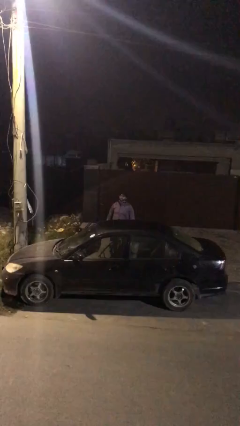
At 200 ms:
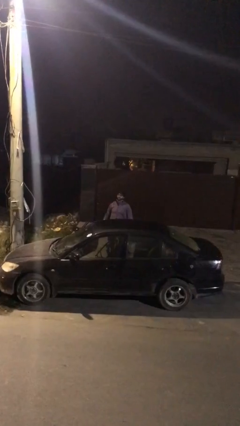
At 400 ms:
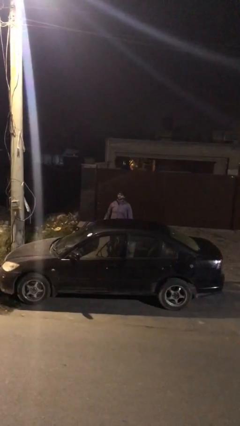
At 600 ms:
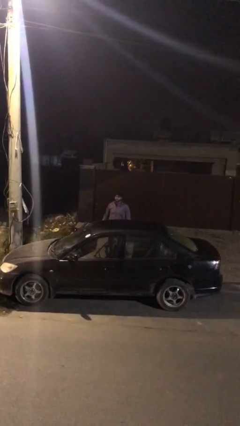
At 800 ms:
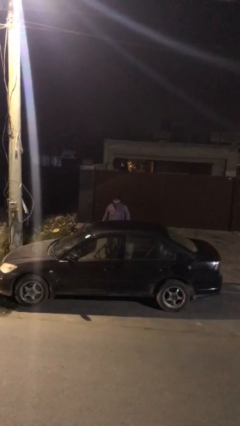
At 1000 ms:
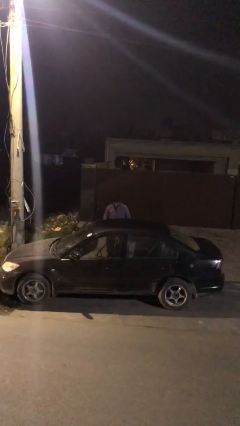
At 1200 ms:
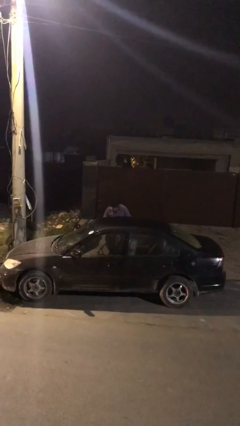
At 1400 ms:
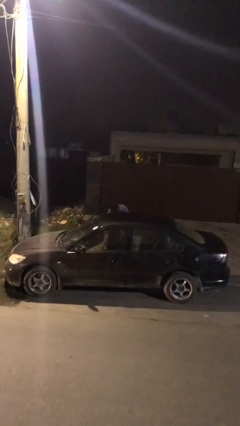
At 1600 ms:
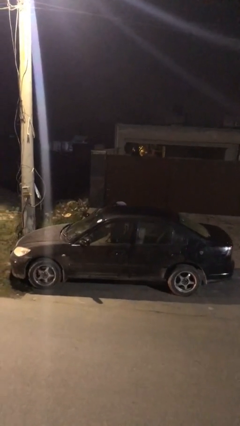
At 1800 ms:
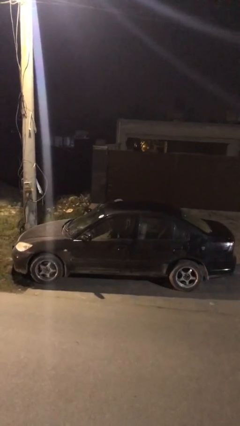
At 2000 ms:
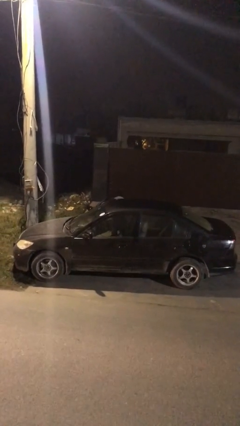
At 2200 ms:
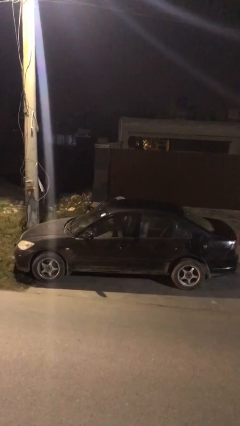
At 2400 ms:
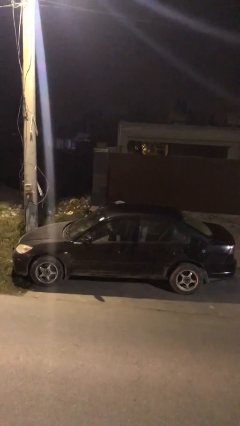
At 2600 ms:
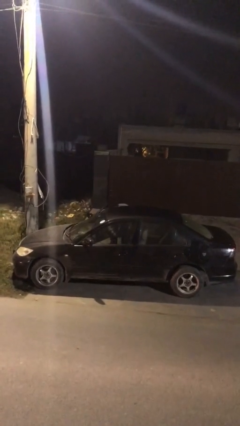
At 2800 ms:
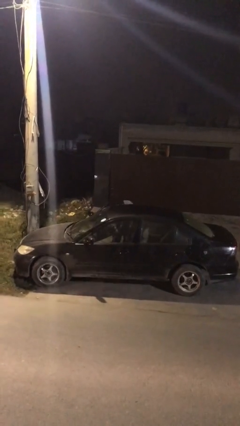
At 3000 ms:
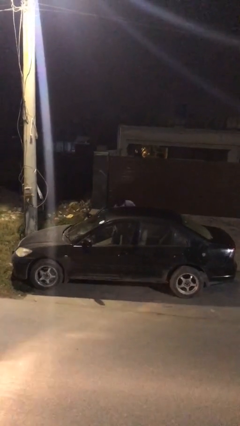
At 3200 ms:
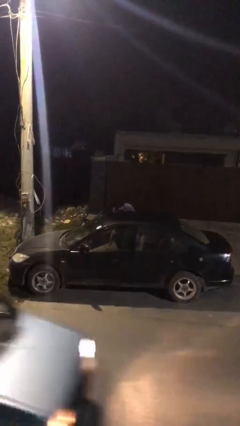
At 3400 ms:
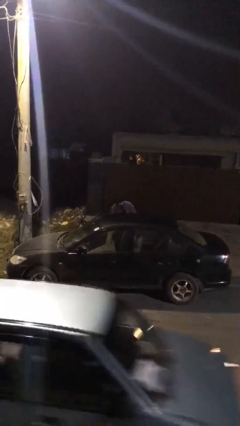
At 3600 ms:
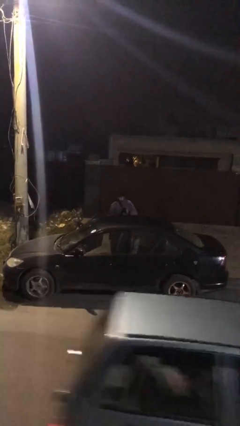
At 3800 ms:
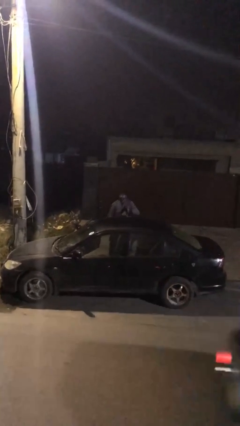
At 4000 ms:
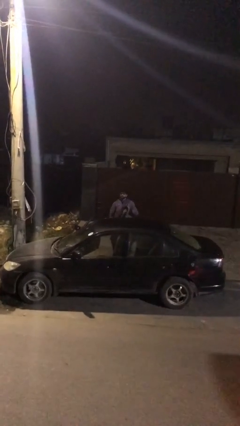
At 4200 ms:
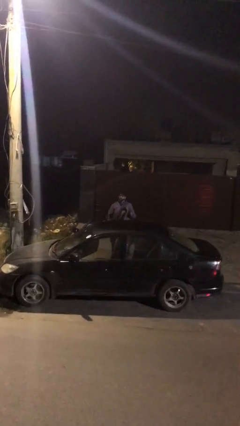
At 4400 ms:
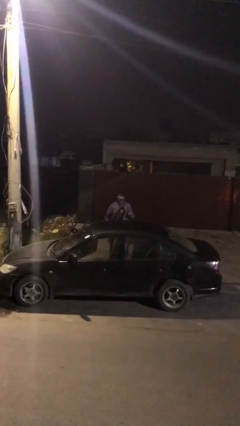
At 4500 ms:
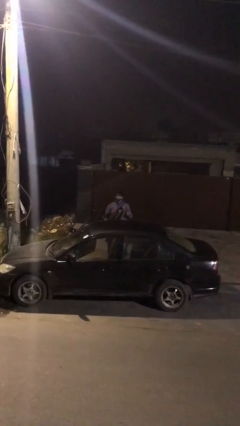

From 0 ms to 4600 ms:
person unloads car

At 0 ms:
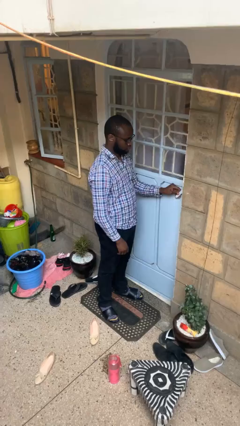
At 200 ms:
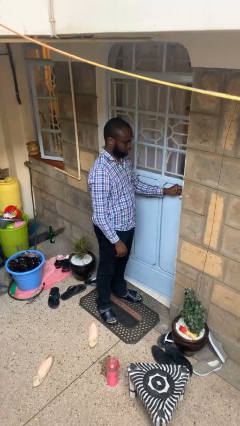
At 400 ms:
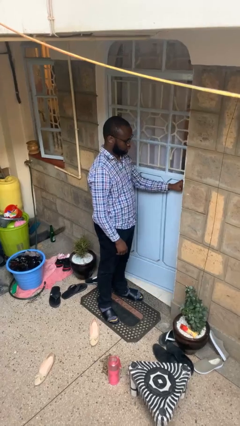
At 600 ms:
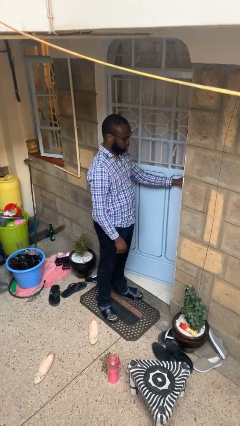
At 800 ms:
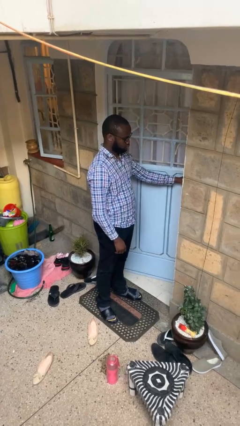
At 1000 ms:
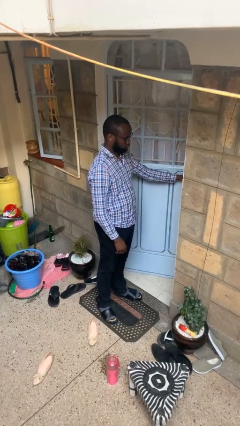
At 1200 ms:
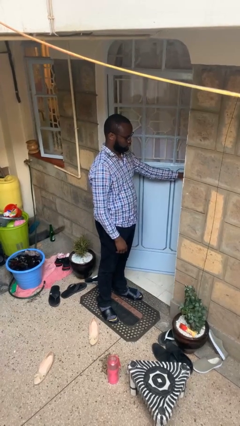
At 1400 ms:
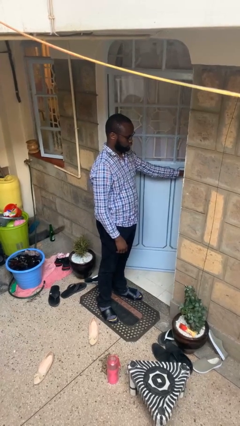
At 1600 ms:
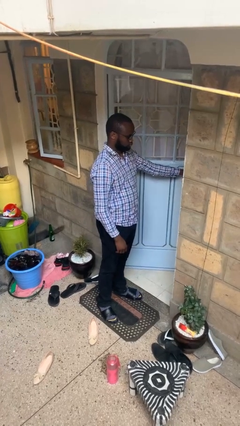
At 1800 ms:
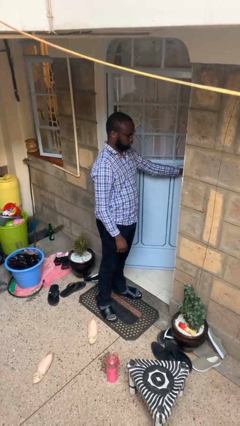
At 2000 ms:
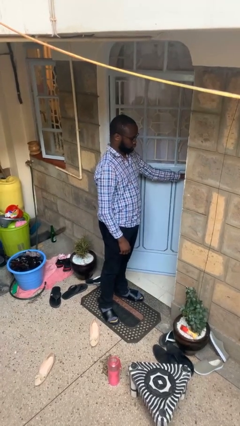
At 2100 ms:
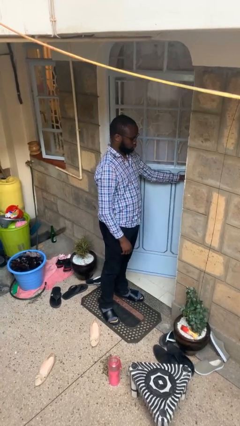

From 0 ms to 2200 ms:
person opens facility door

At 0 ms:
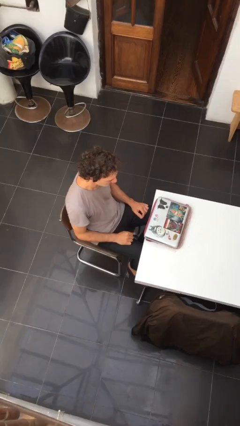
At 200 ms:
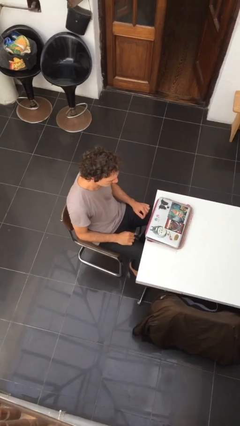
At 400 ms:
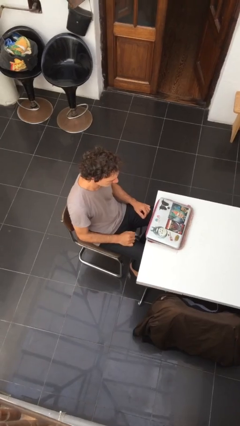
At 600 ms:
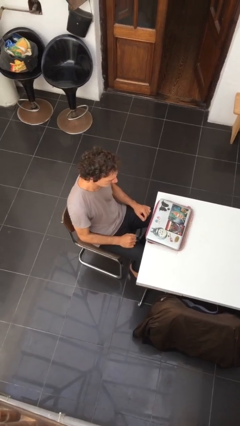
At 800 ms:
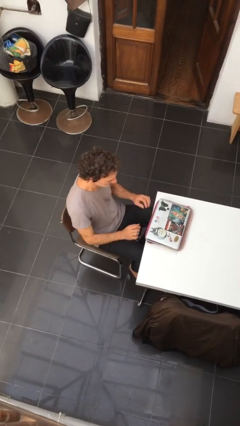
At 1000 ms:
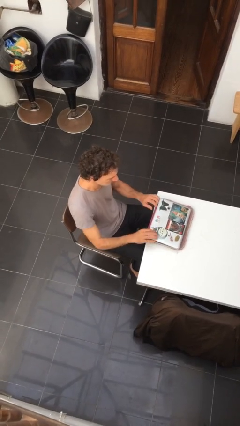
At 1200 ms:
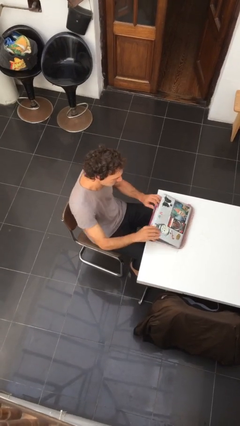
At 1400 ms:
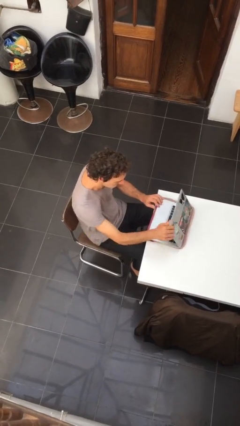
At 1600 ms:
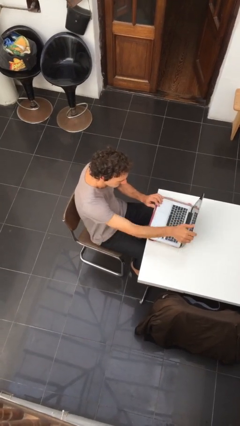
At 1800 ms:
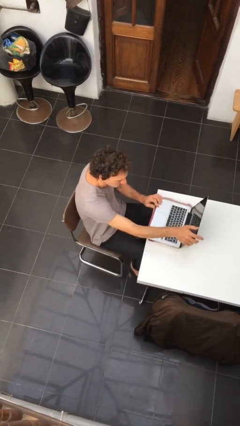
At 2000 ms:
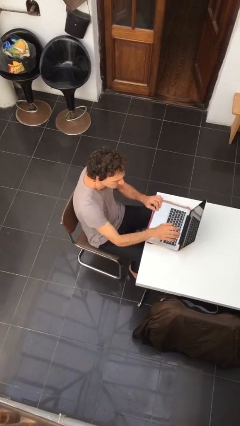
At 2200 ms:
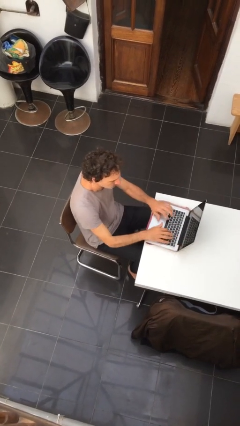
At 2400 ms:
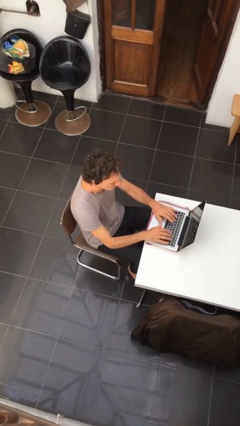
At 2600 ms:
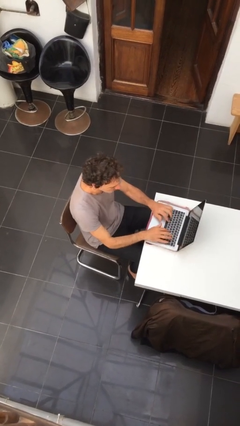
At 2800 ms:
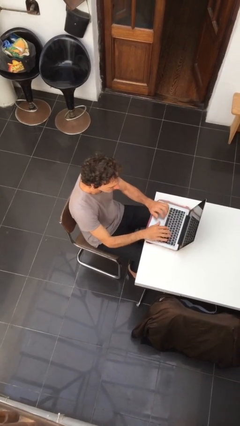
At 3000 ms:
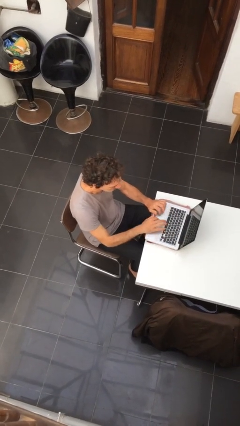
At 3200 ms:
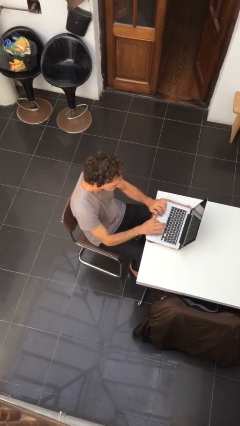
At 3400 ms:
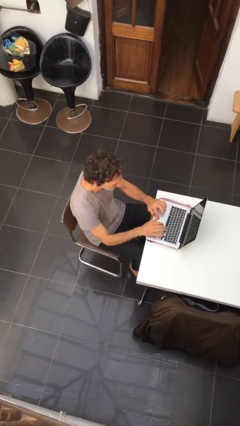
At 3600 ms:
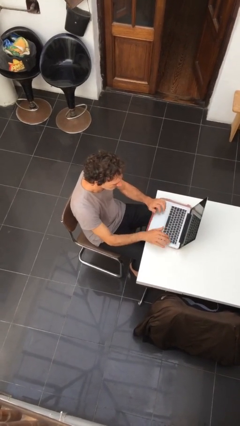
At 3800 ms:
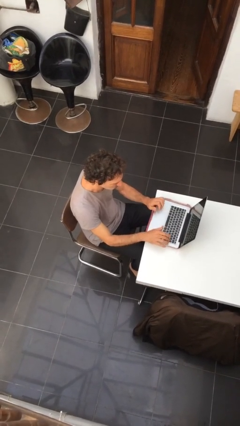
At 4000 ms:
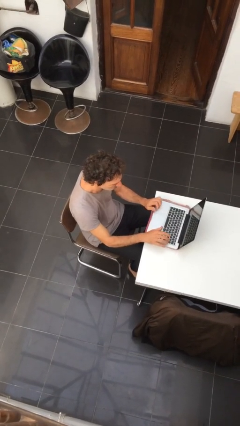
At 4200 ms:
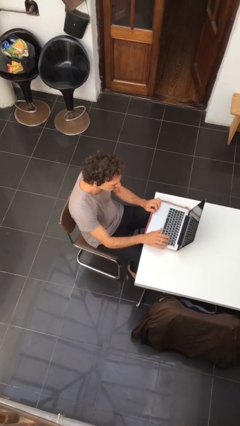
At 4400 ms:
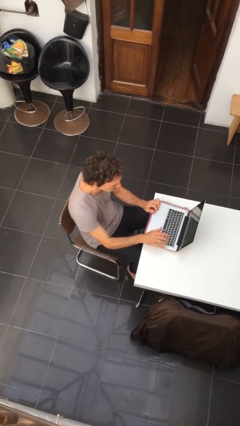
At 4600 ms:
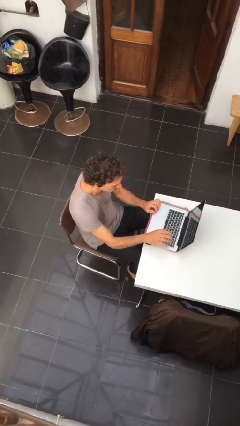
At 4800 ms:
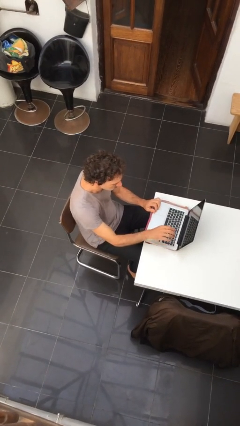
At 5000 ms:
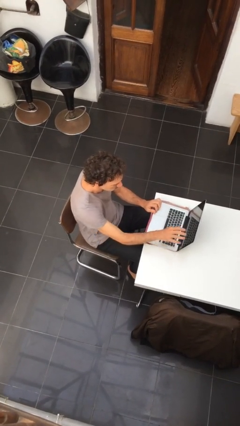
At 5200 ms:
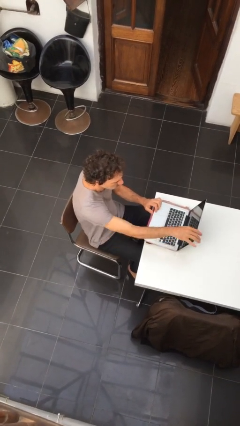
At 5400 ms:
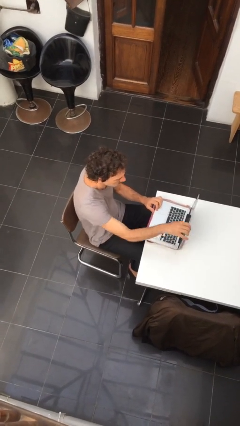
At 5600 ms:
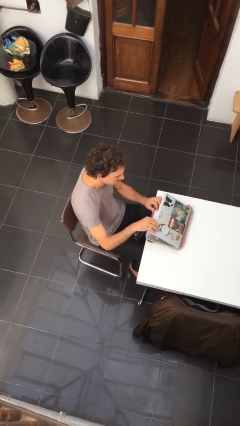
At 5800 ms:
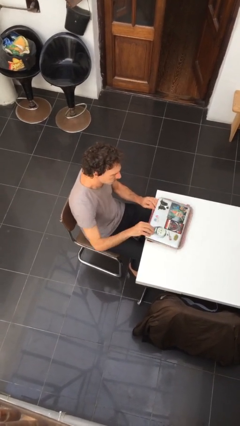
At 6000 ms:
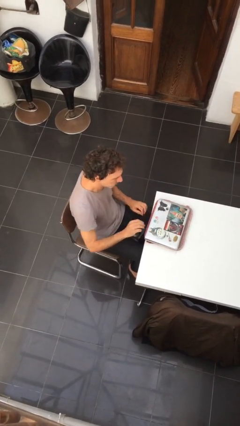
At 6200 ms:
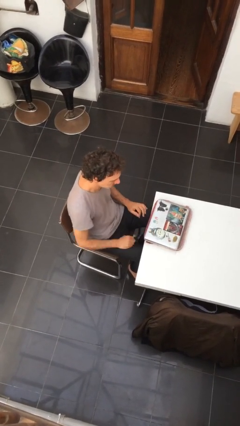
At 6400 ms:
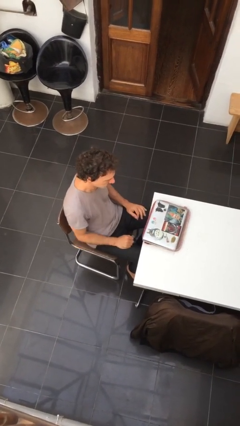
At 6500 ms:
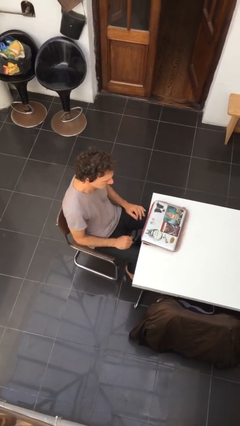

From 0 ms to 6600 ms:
person interacts with laptop

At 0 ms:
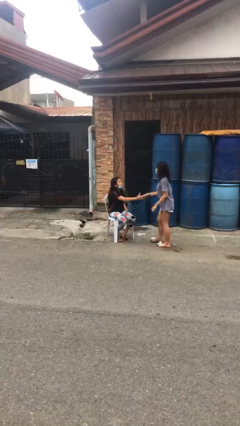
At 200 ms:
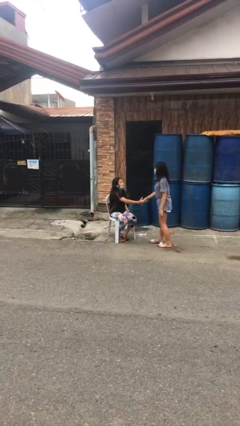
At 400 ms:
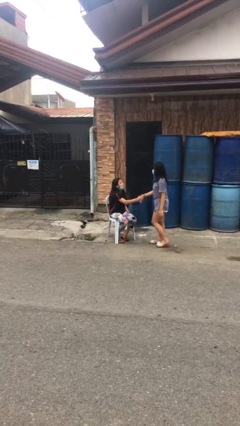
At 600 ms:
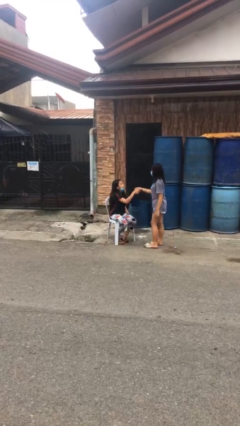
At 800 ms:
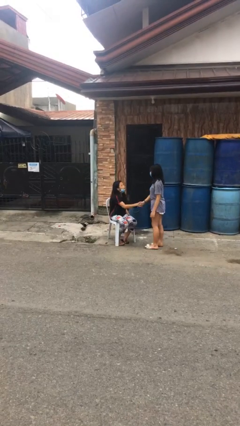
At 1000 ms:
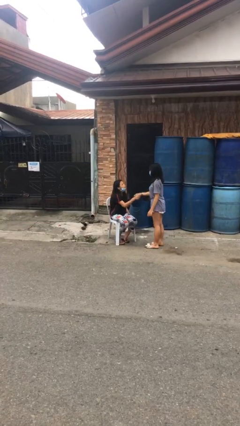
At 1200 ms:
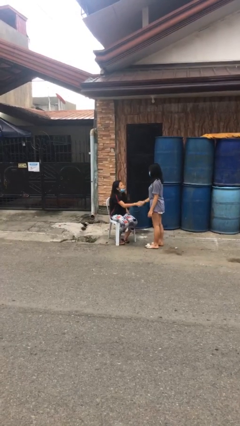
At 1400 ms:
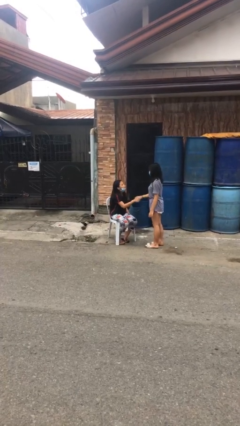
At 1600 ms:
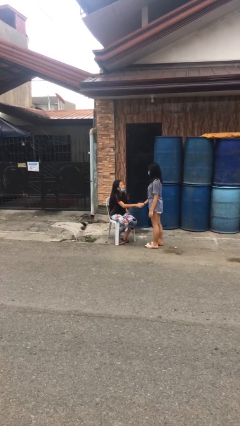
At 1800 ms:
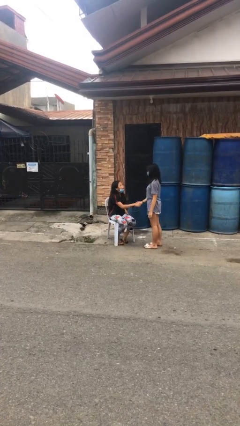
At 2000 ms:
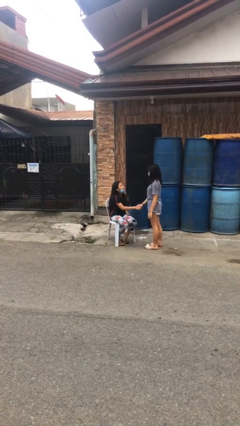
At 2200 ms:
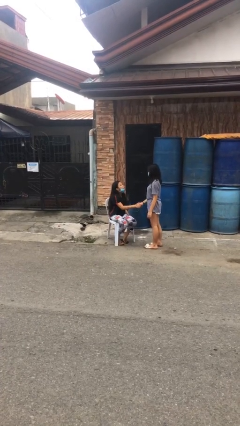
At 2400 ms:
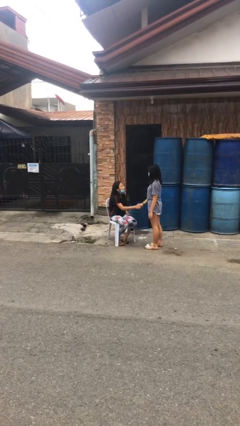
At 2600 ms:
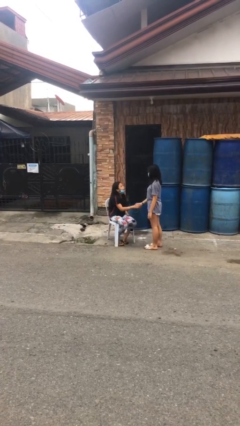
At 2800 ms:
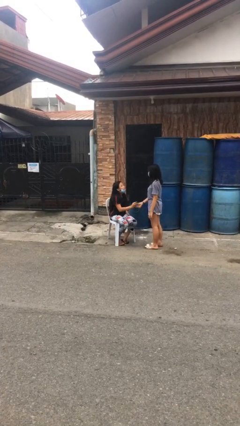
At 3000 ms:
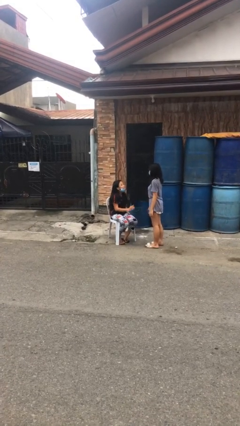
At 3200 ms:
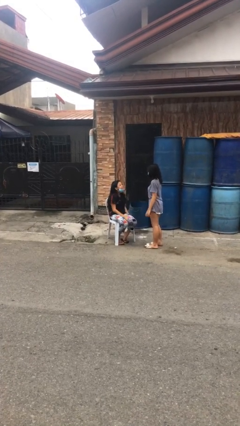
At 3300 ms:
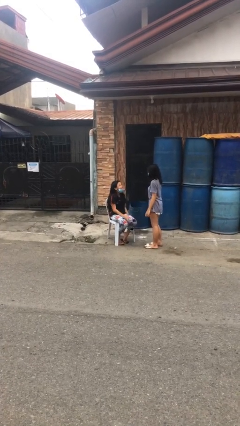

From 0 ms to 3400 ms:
person shakes hand

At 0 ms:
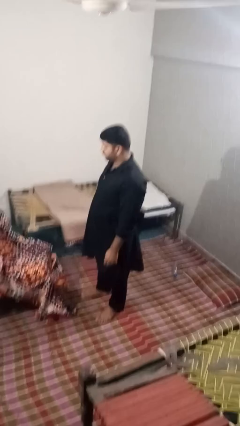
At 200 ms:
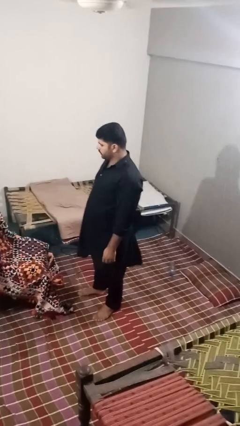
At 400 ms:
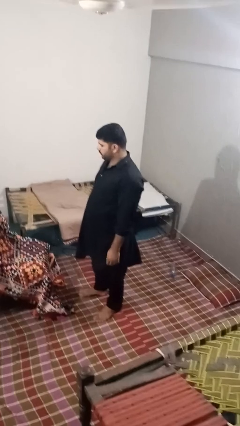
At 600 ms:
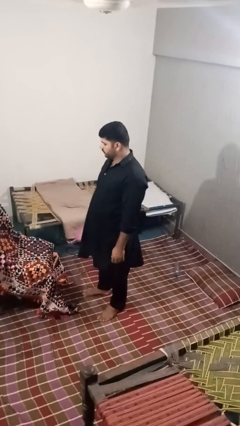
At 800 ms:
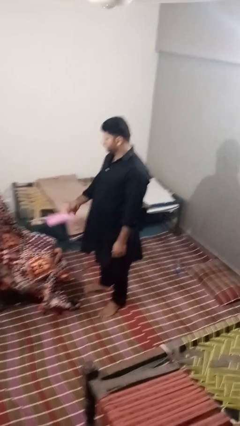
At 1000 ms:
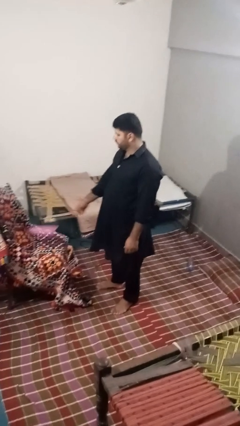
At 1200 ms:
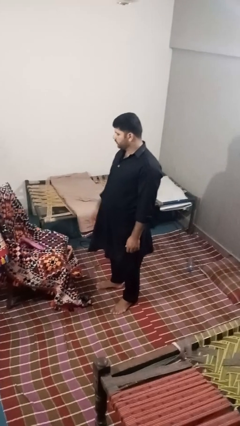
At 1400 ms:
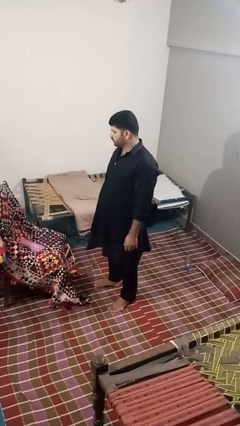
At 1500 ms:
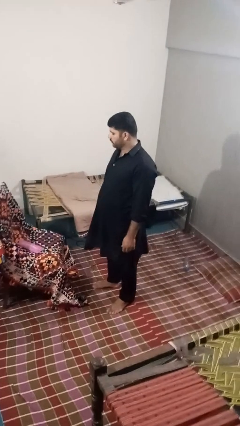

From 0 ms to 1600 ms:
person puts down object on couch
